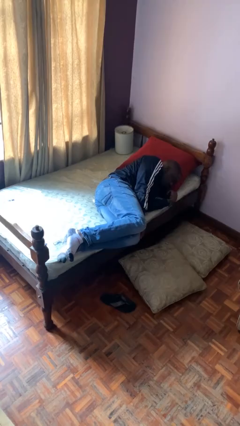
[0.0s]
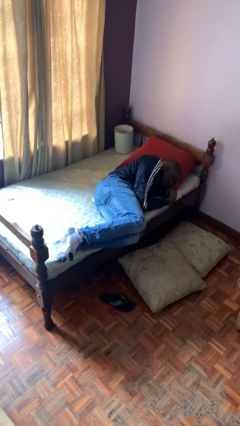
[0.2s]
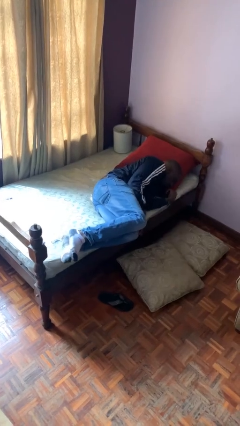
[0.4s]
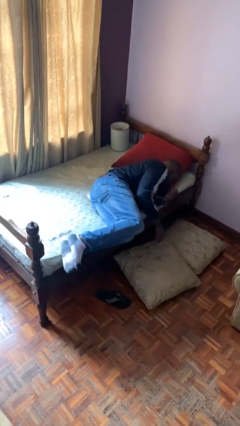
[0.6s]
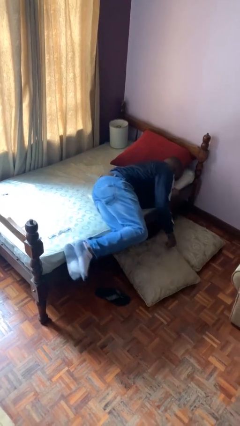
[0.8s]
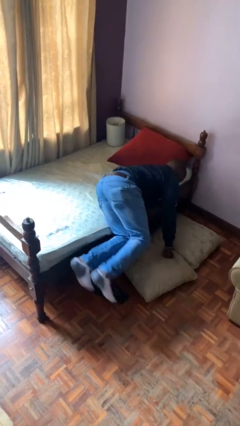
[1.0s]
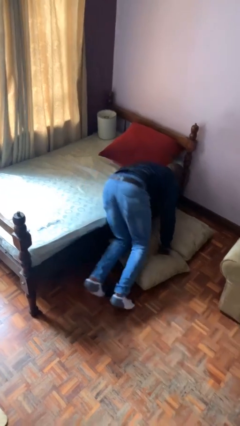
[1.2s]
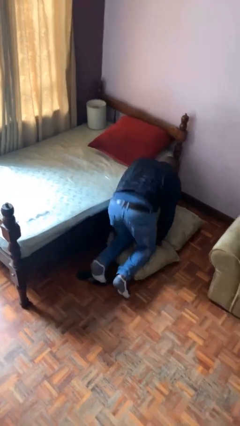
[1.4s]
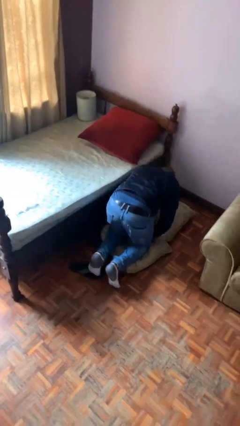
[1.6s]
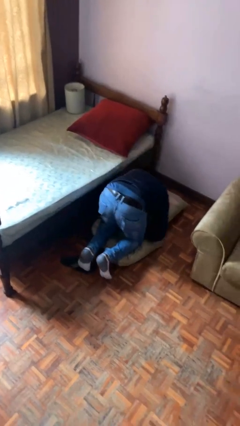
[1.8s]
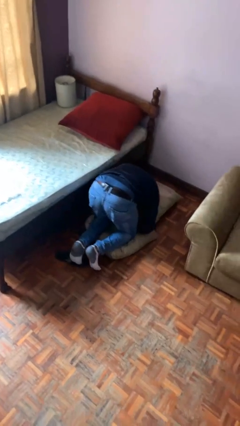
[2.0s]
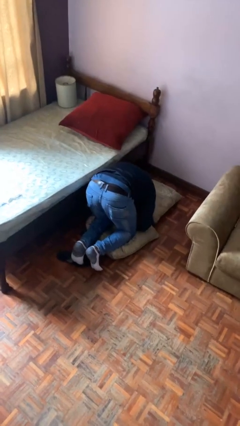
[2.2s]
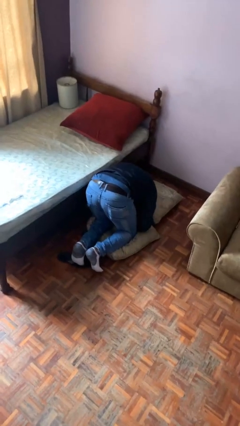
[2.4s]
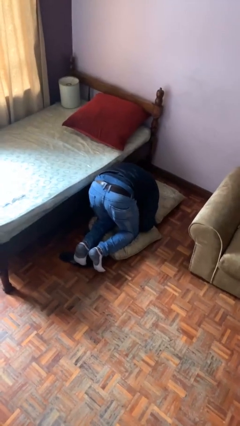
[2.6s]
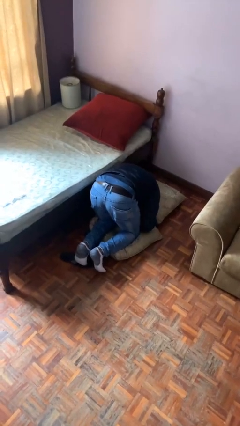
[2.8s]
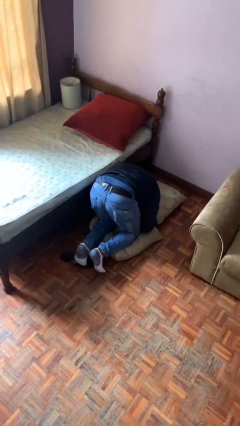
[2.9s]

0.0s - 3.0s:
person falls from bed

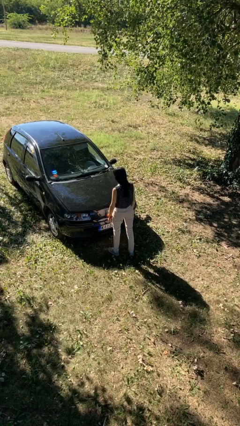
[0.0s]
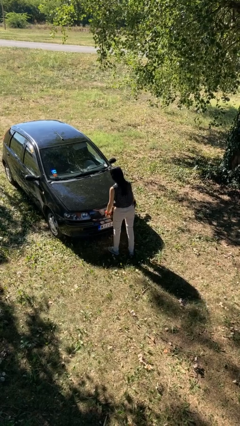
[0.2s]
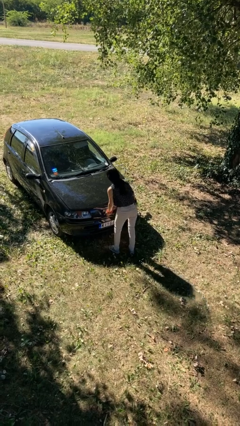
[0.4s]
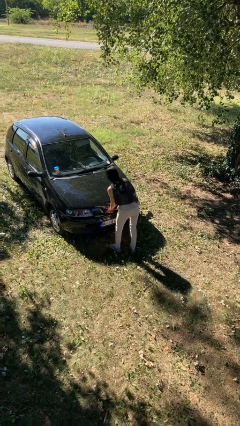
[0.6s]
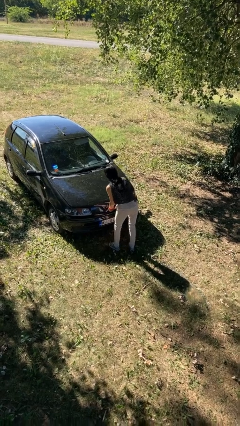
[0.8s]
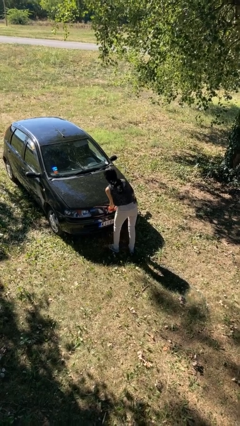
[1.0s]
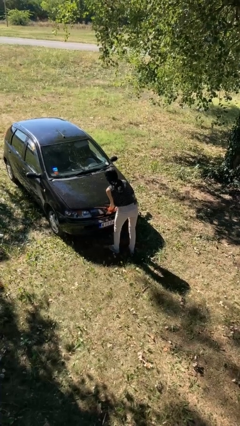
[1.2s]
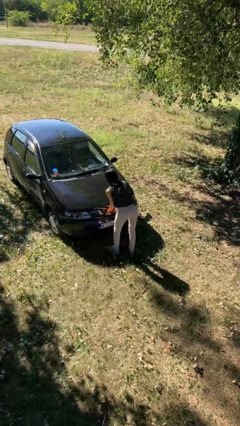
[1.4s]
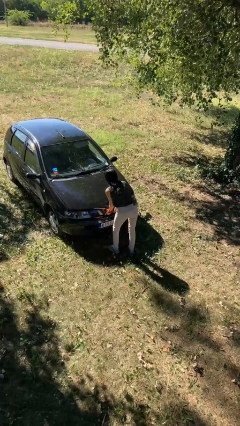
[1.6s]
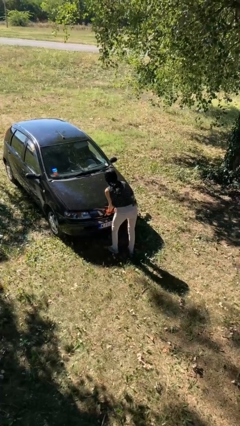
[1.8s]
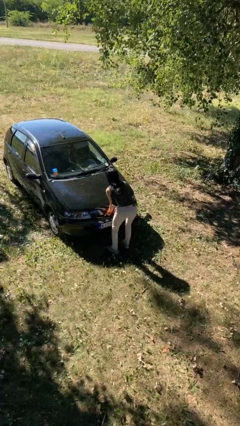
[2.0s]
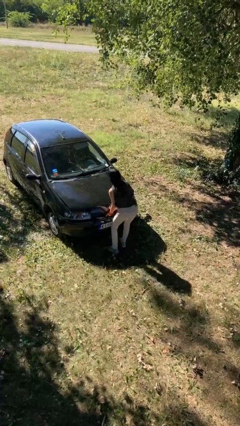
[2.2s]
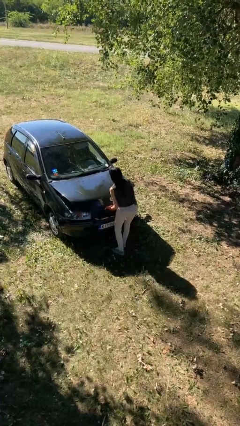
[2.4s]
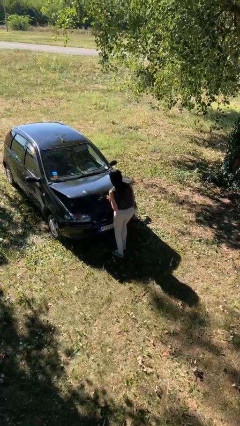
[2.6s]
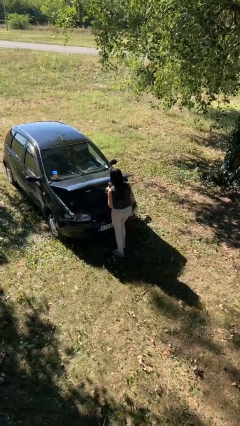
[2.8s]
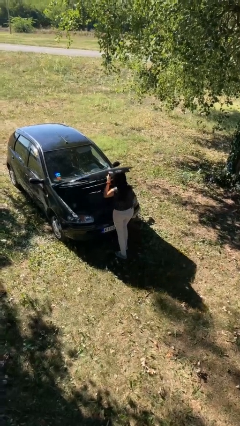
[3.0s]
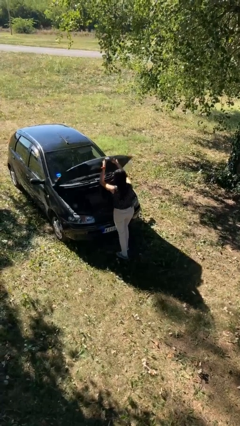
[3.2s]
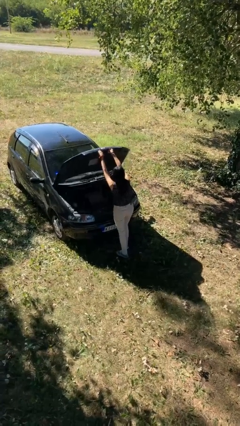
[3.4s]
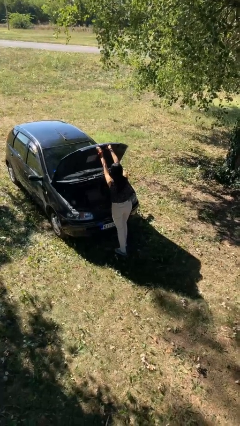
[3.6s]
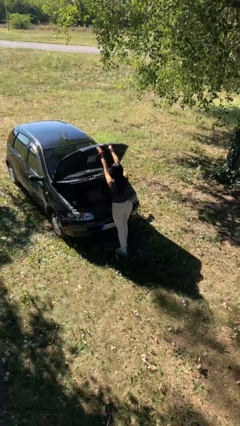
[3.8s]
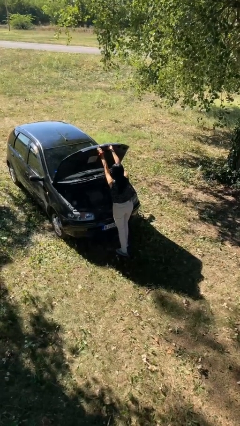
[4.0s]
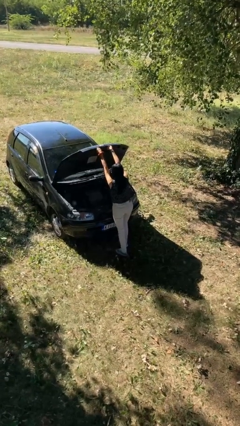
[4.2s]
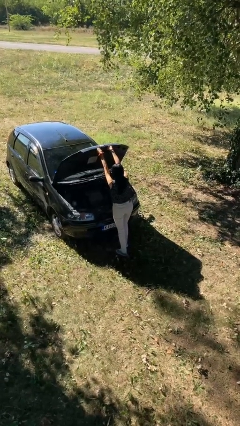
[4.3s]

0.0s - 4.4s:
person opens car hood

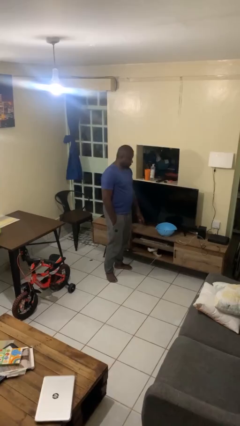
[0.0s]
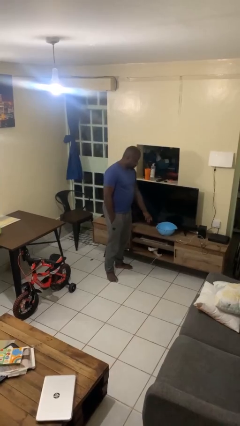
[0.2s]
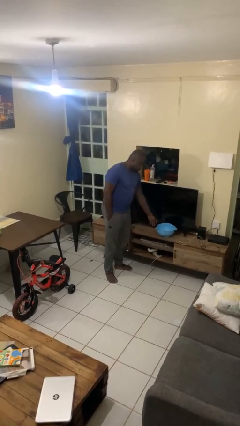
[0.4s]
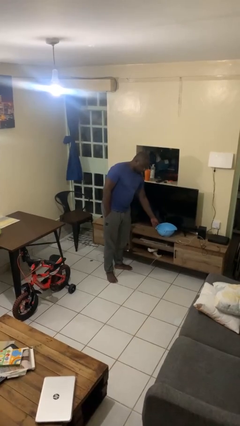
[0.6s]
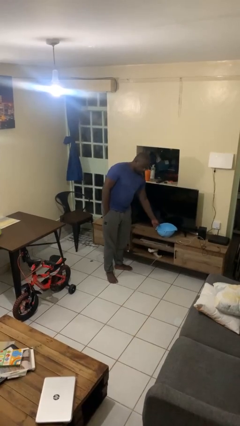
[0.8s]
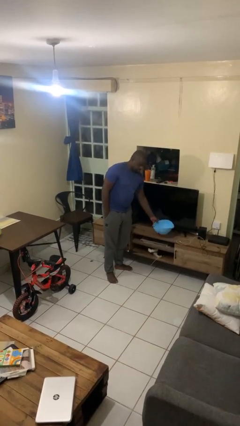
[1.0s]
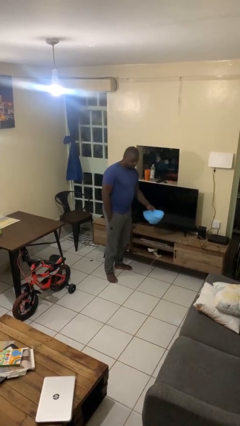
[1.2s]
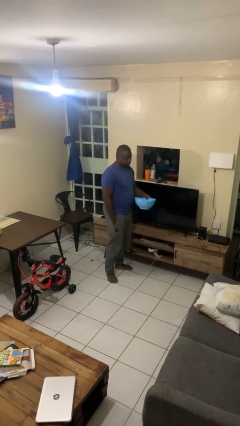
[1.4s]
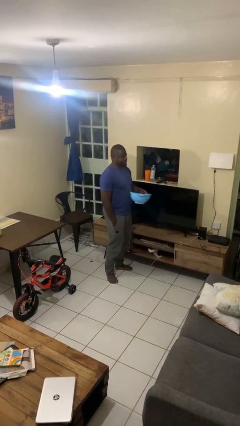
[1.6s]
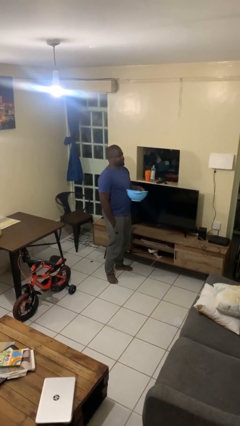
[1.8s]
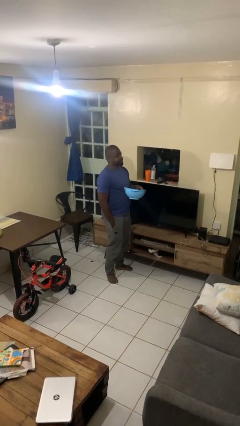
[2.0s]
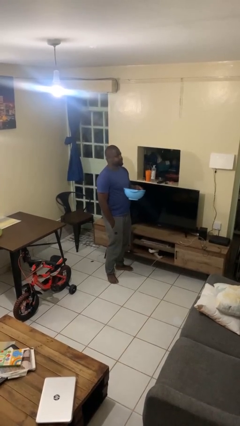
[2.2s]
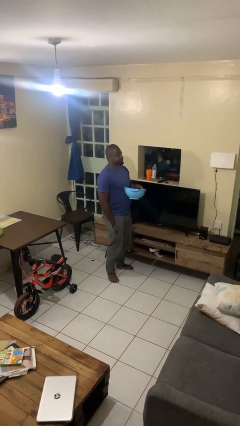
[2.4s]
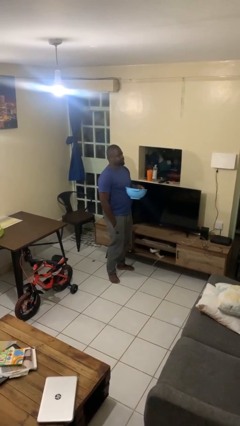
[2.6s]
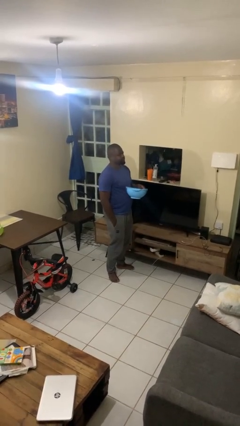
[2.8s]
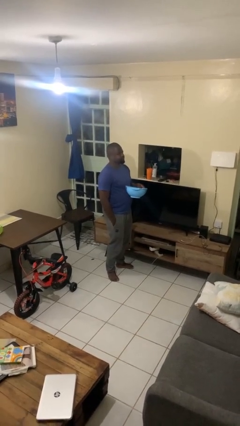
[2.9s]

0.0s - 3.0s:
person picks up object from countertop

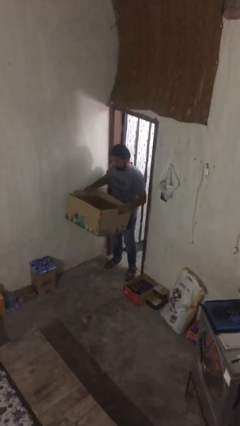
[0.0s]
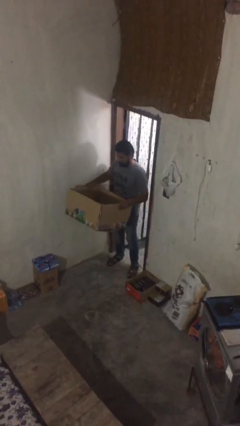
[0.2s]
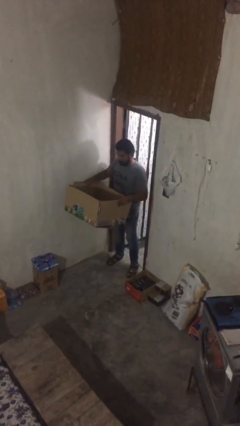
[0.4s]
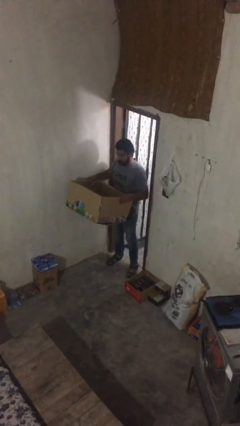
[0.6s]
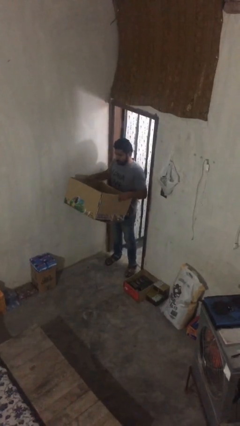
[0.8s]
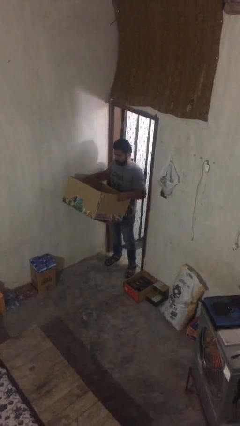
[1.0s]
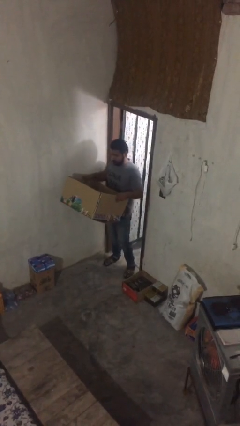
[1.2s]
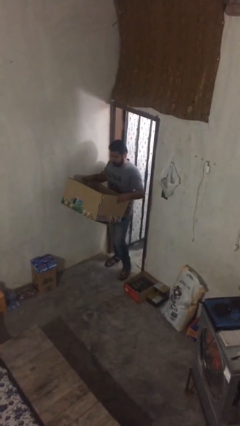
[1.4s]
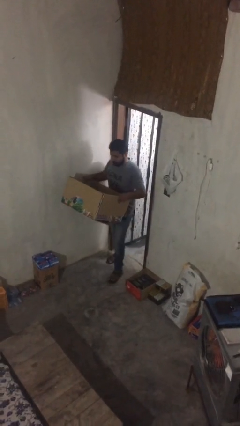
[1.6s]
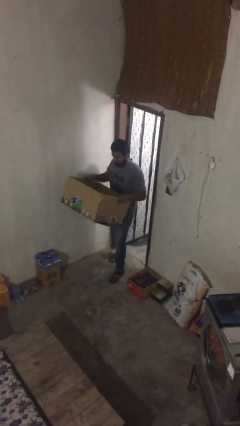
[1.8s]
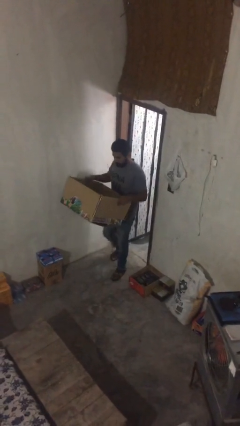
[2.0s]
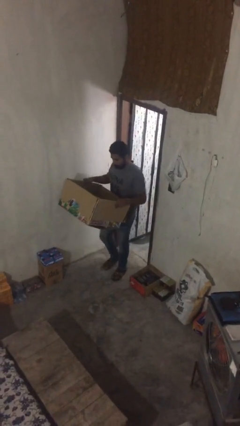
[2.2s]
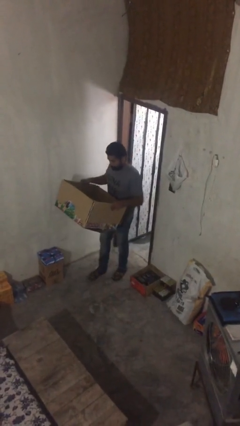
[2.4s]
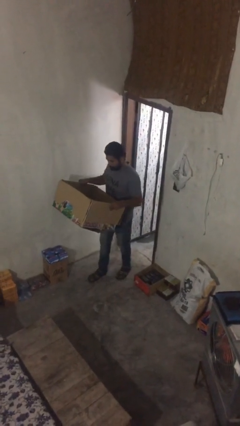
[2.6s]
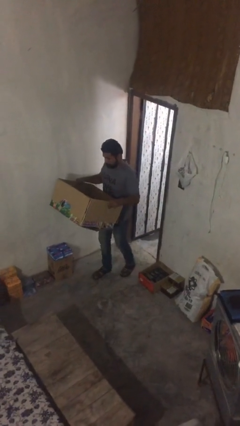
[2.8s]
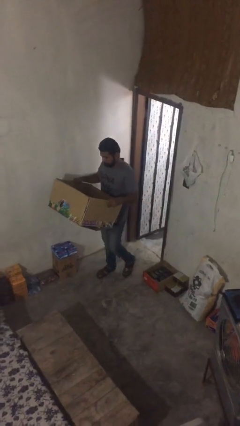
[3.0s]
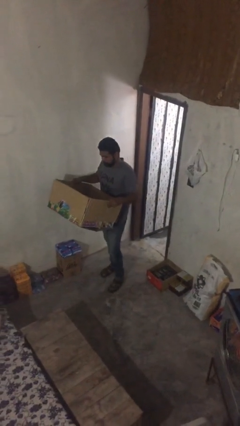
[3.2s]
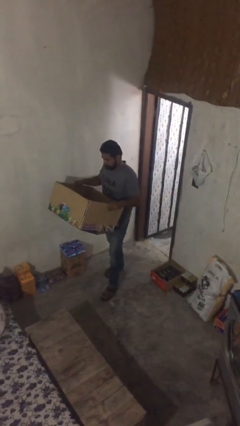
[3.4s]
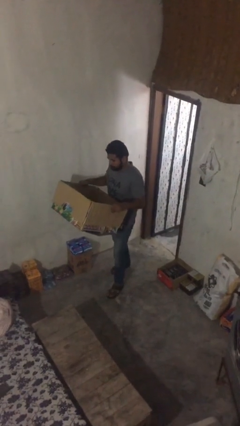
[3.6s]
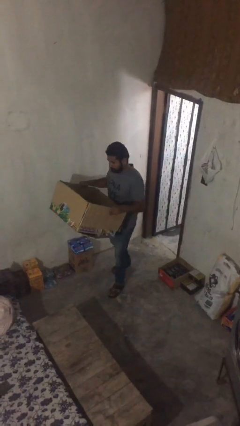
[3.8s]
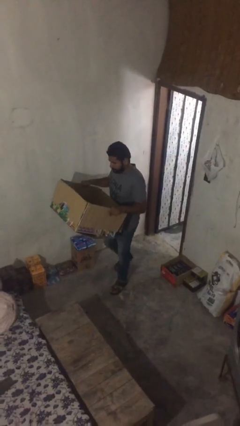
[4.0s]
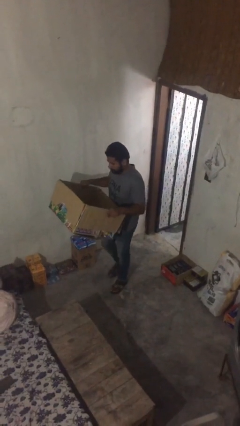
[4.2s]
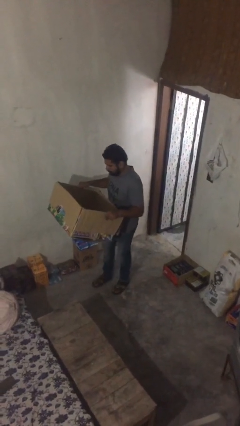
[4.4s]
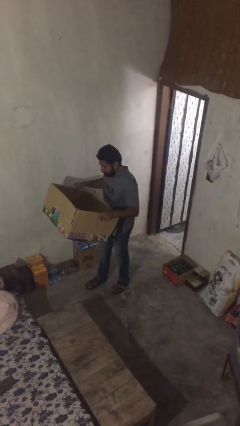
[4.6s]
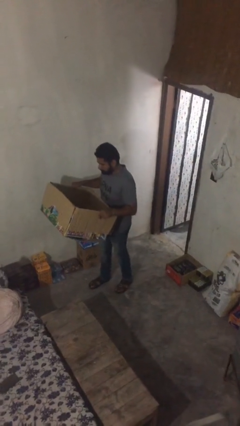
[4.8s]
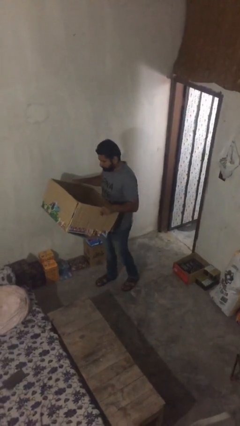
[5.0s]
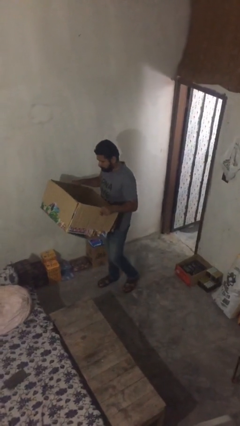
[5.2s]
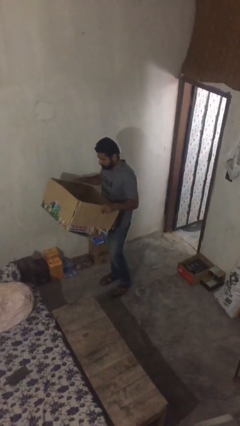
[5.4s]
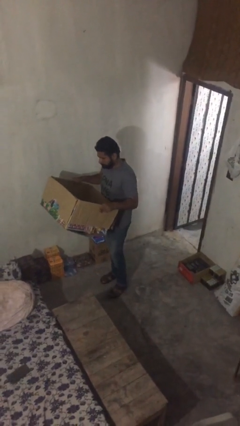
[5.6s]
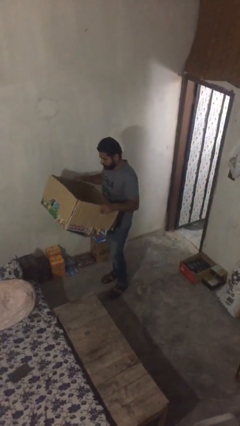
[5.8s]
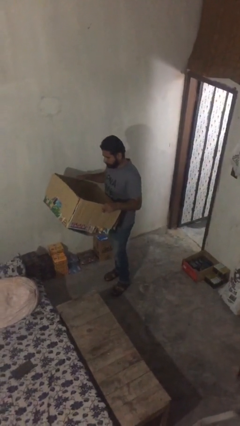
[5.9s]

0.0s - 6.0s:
person carries heavy object

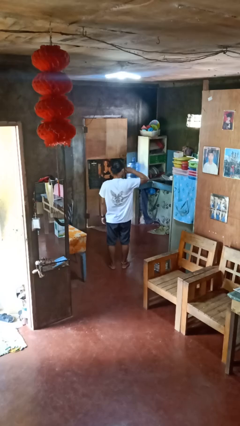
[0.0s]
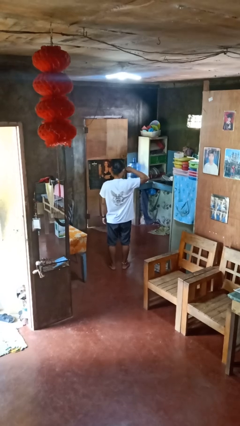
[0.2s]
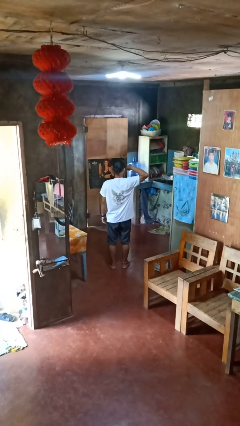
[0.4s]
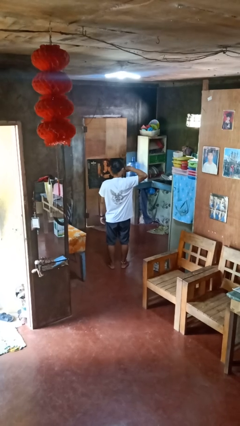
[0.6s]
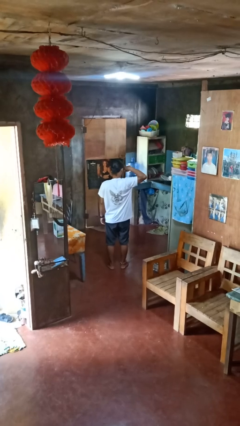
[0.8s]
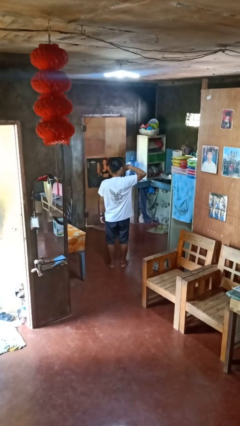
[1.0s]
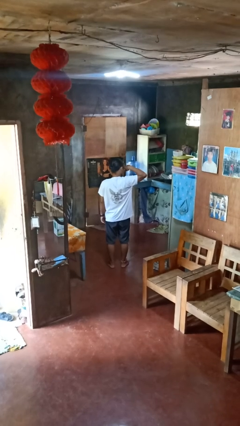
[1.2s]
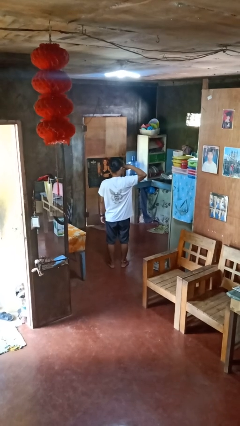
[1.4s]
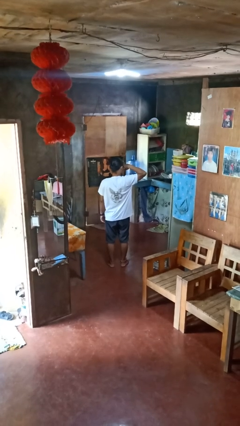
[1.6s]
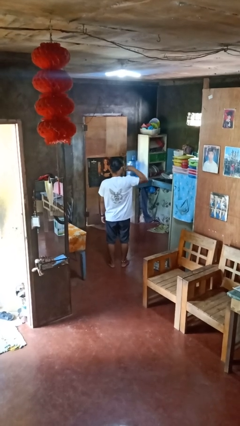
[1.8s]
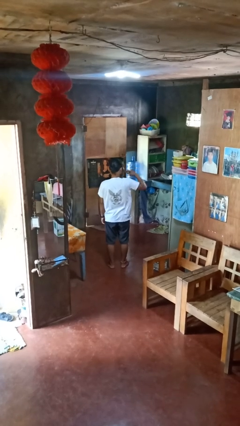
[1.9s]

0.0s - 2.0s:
person rubs eyes
